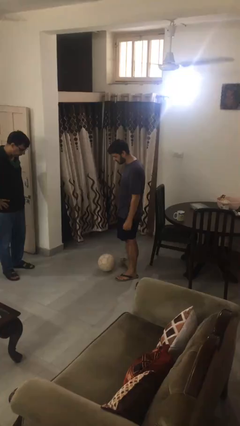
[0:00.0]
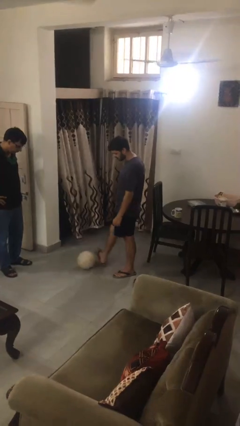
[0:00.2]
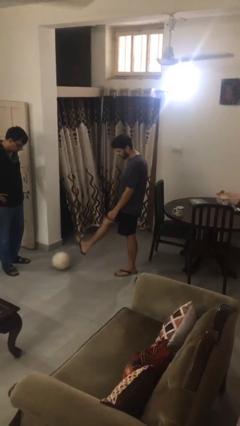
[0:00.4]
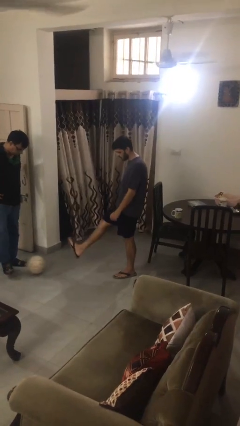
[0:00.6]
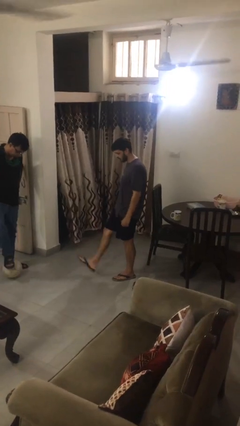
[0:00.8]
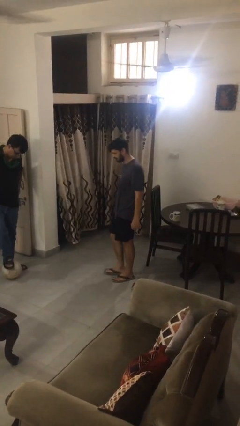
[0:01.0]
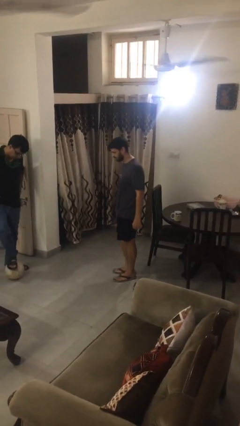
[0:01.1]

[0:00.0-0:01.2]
person kicks object to person

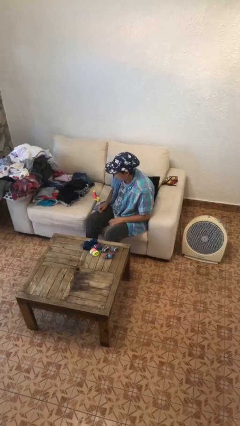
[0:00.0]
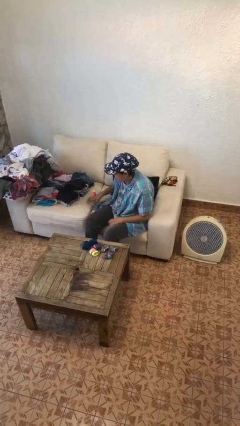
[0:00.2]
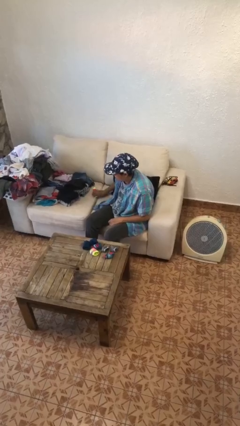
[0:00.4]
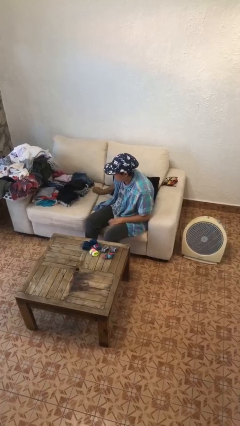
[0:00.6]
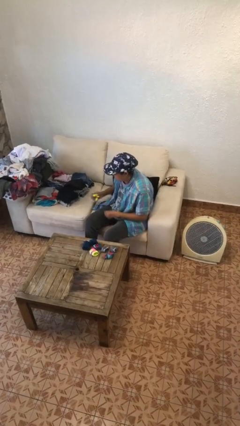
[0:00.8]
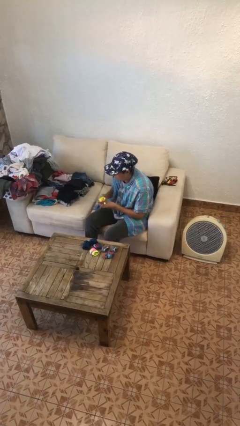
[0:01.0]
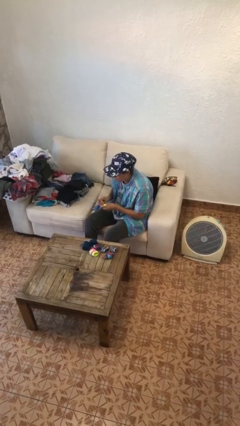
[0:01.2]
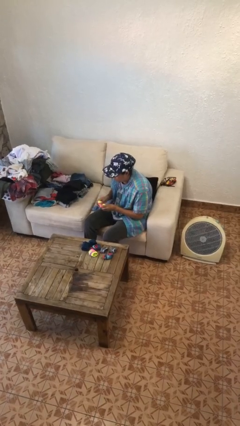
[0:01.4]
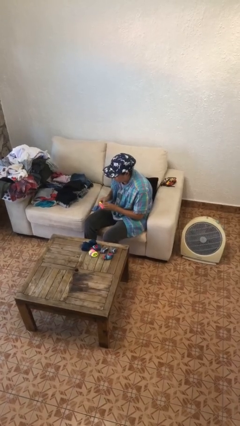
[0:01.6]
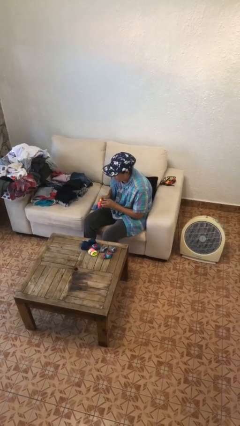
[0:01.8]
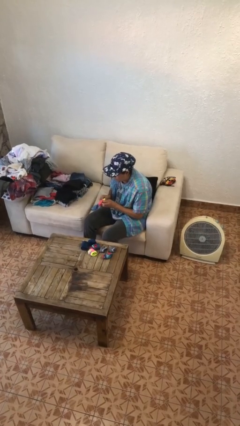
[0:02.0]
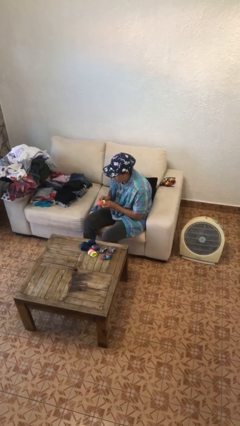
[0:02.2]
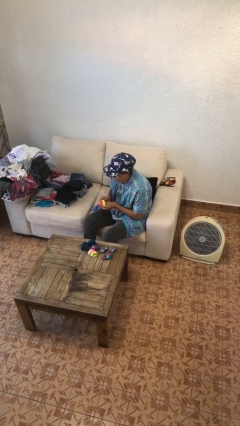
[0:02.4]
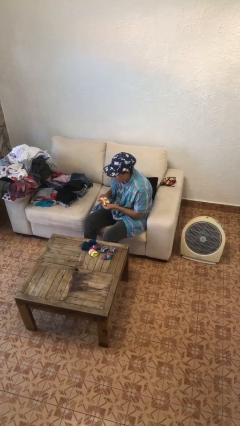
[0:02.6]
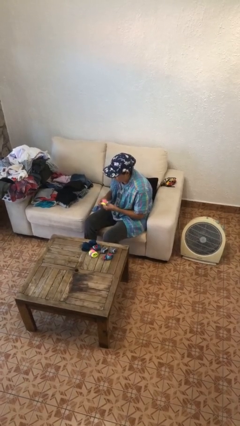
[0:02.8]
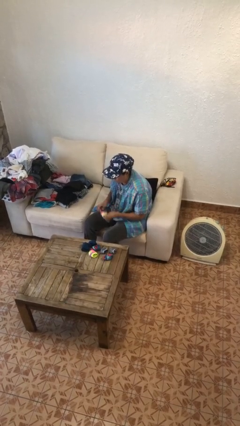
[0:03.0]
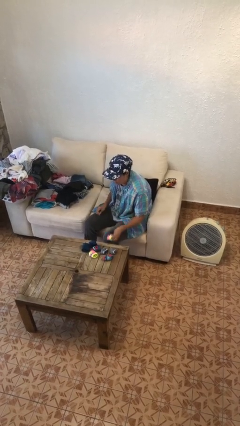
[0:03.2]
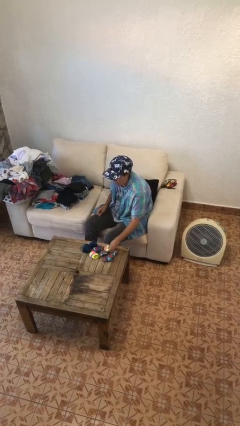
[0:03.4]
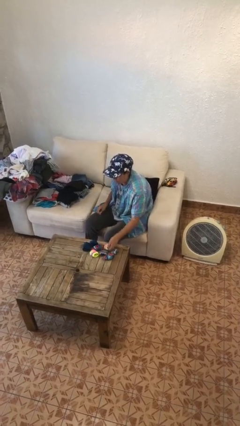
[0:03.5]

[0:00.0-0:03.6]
person folds socks

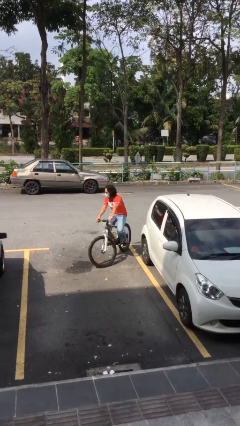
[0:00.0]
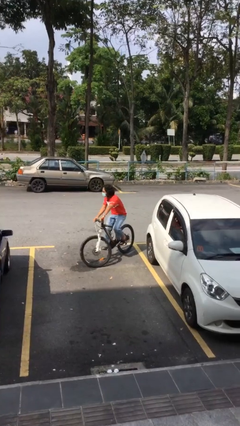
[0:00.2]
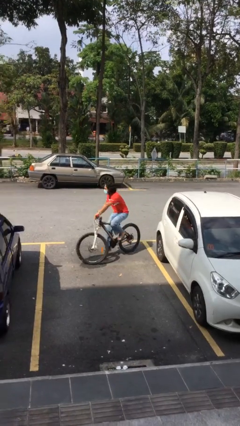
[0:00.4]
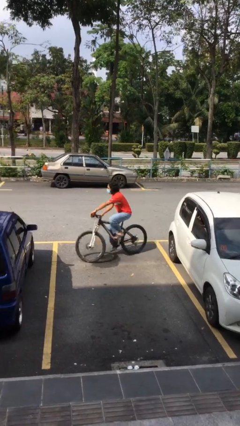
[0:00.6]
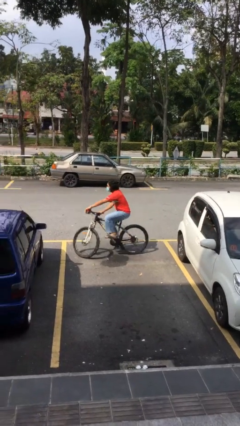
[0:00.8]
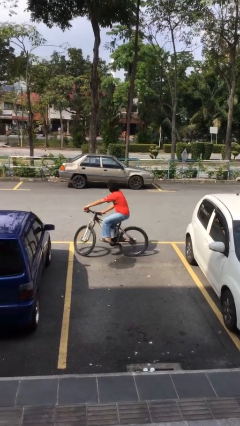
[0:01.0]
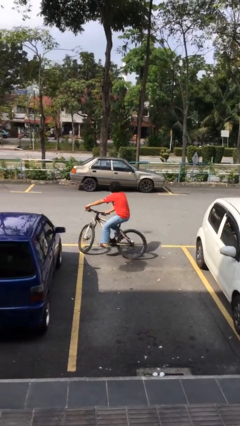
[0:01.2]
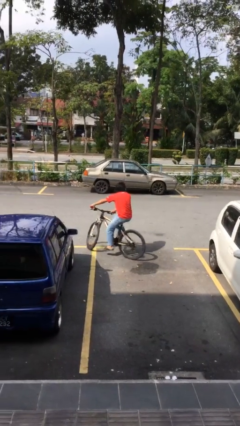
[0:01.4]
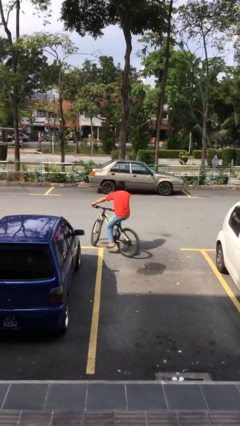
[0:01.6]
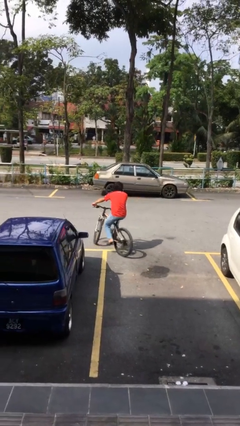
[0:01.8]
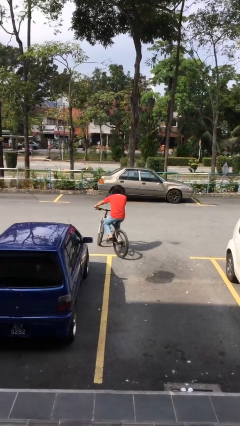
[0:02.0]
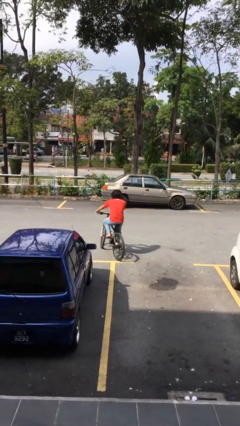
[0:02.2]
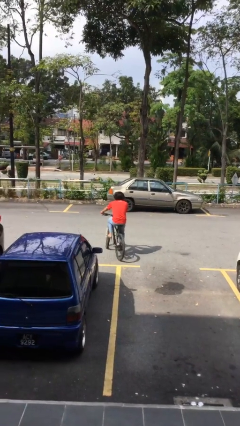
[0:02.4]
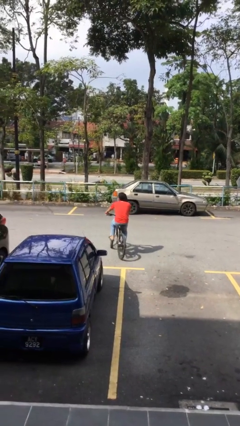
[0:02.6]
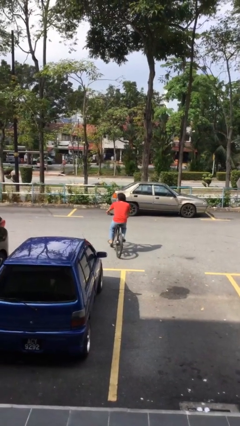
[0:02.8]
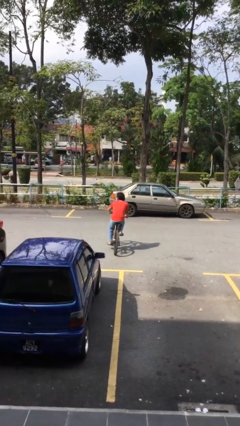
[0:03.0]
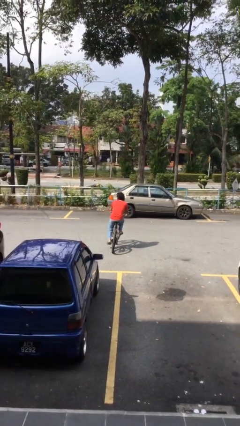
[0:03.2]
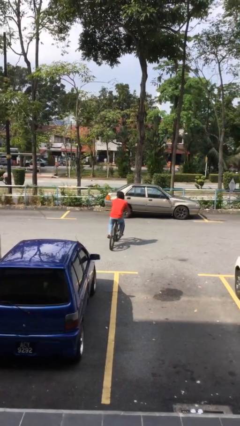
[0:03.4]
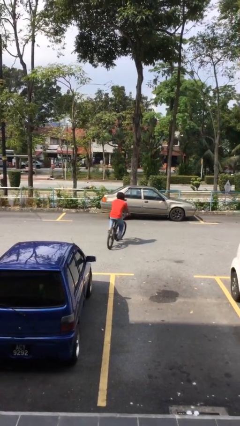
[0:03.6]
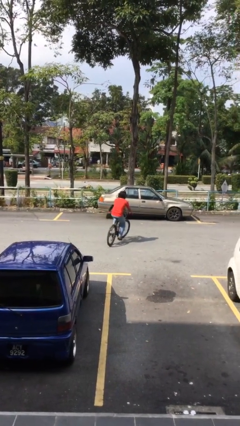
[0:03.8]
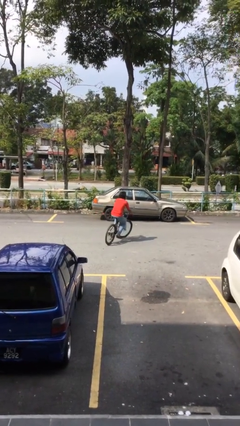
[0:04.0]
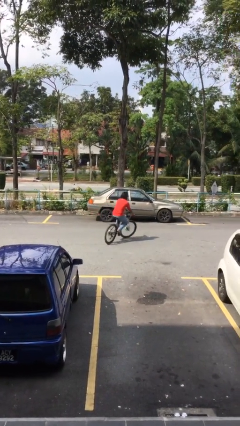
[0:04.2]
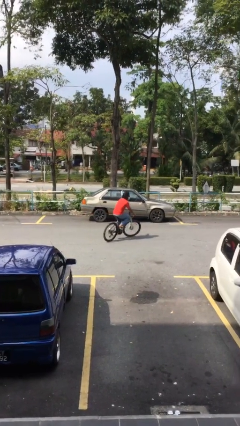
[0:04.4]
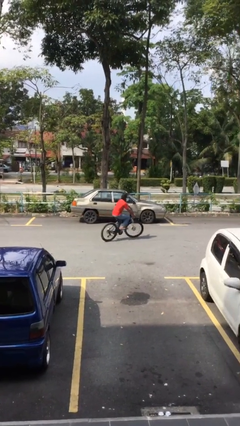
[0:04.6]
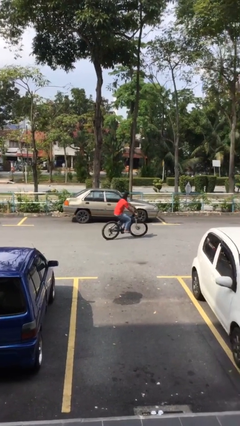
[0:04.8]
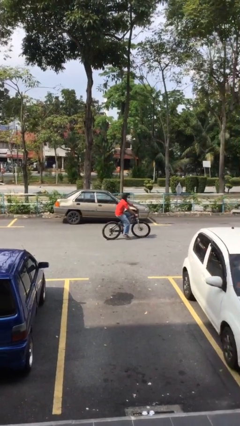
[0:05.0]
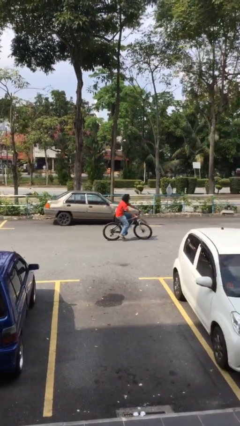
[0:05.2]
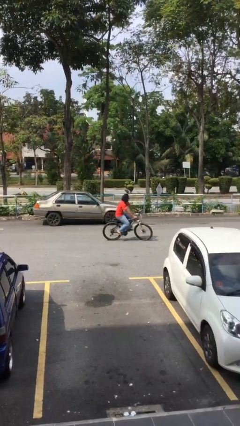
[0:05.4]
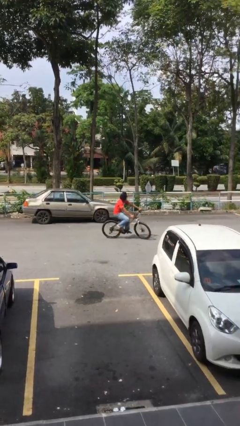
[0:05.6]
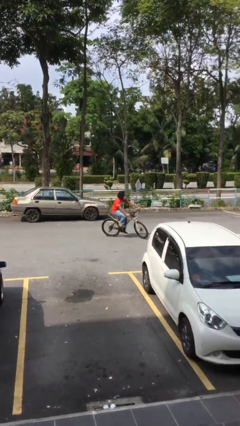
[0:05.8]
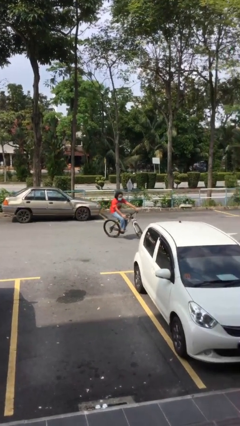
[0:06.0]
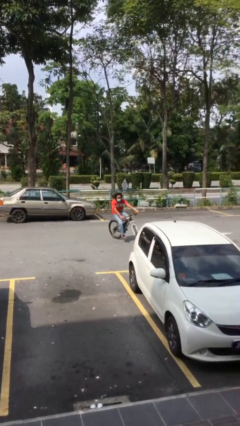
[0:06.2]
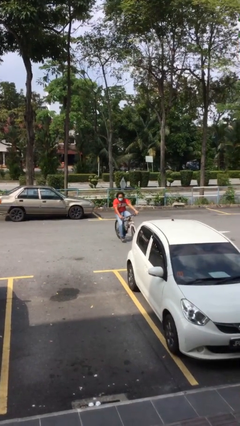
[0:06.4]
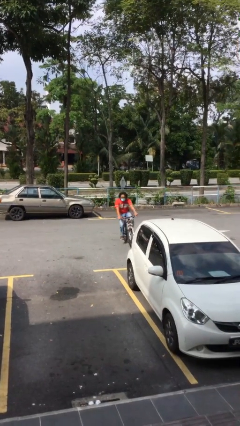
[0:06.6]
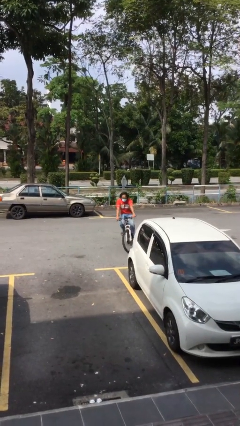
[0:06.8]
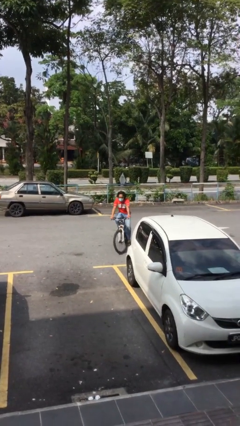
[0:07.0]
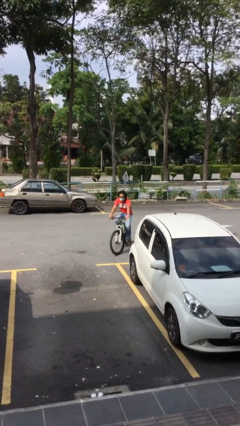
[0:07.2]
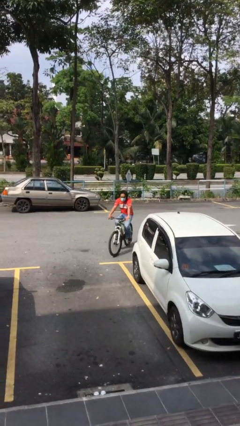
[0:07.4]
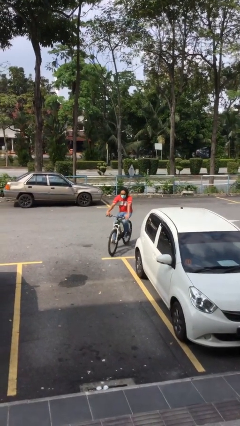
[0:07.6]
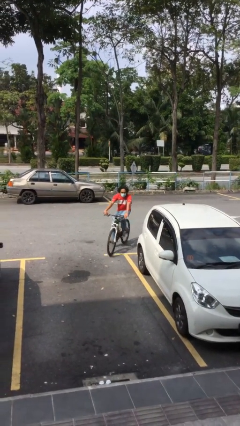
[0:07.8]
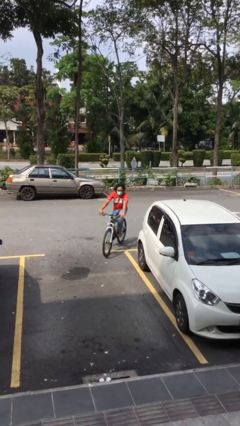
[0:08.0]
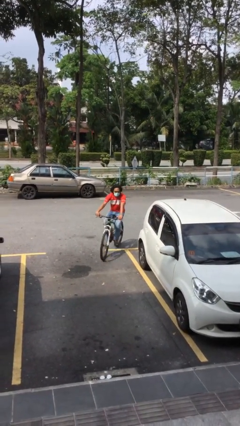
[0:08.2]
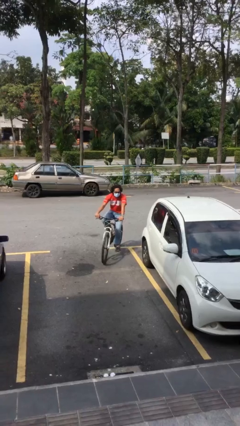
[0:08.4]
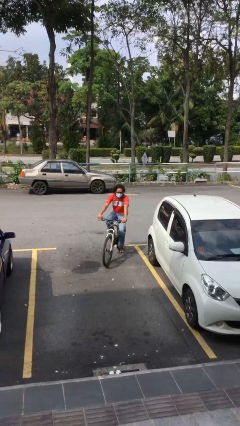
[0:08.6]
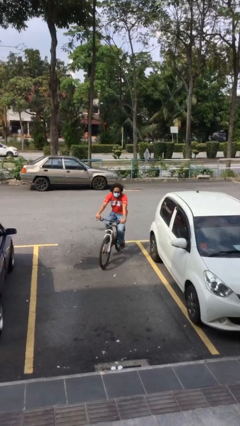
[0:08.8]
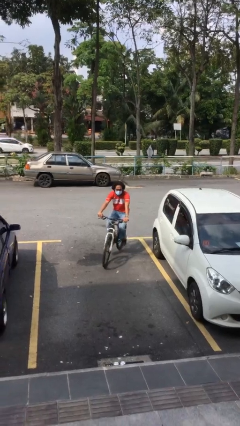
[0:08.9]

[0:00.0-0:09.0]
person rides bicycle

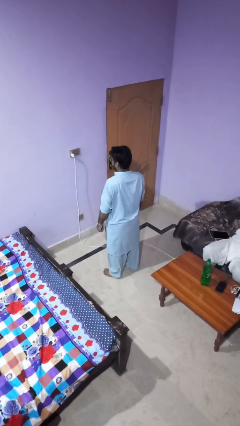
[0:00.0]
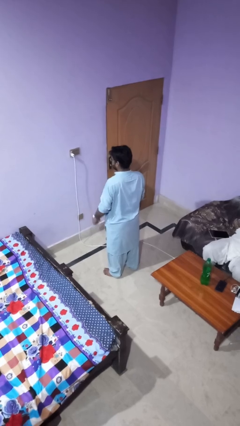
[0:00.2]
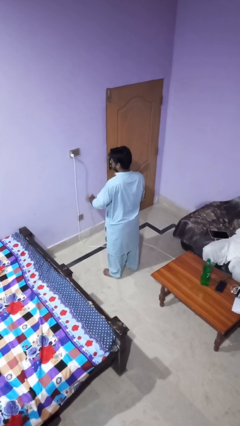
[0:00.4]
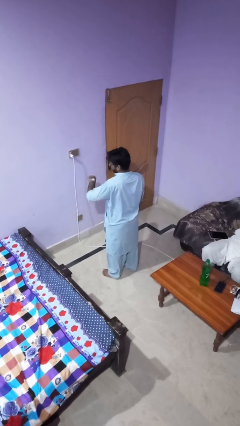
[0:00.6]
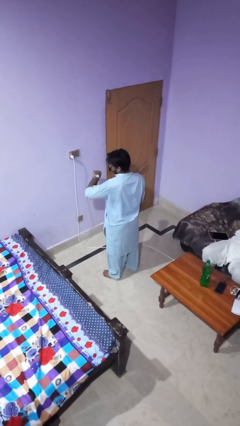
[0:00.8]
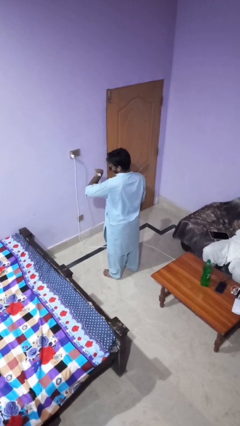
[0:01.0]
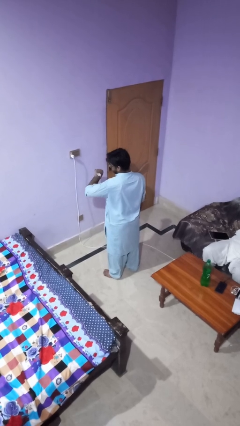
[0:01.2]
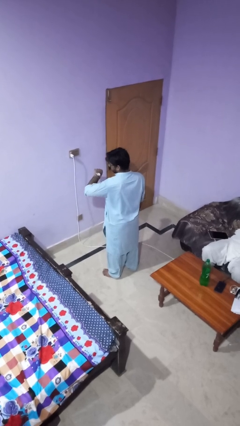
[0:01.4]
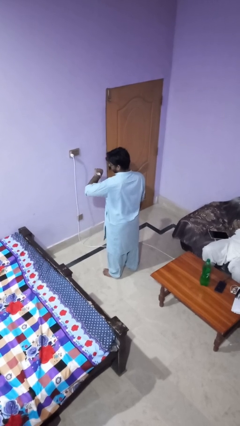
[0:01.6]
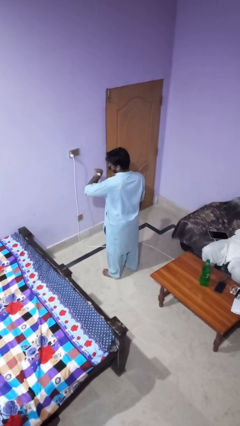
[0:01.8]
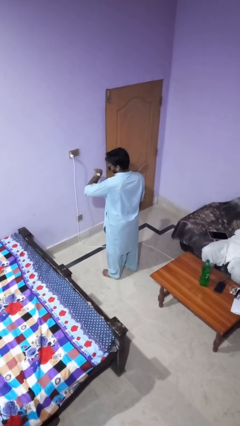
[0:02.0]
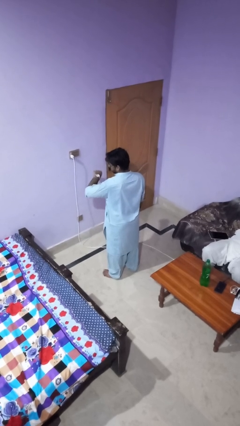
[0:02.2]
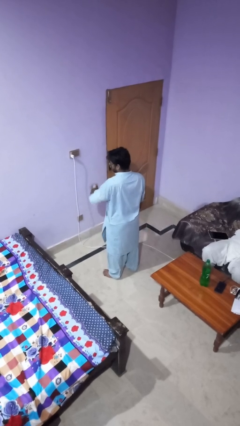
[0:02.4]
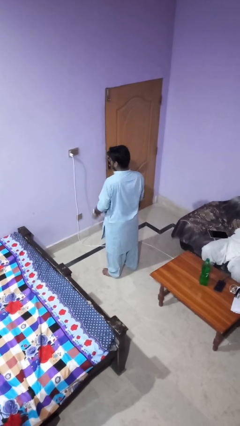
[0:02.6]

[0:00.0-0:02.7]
person looks at wristwatch

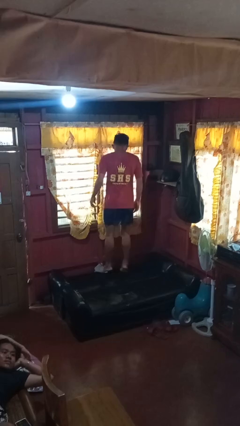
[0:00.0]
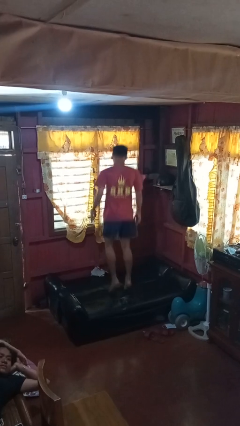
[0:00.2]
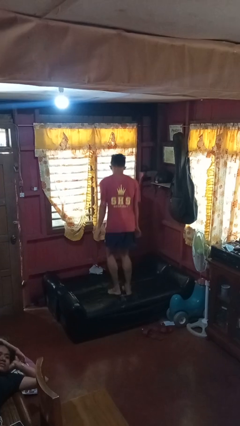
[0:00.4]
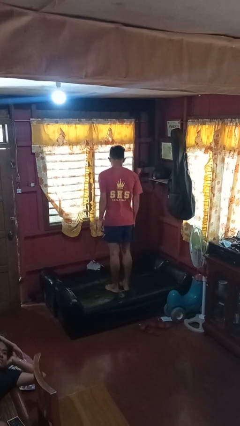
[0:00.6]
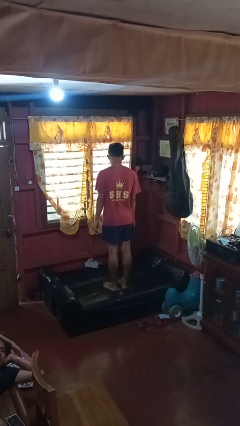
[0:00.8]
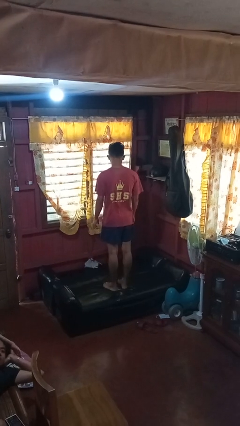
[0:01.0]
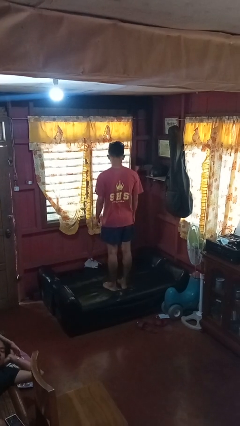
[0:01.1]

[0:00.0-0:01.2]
person jumps on couch
